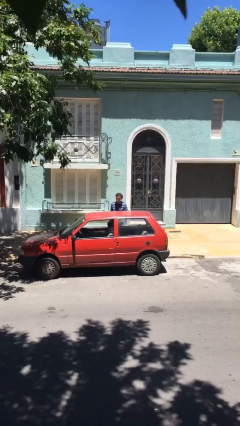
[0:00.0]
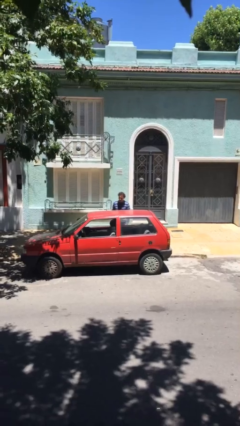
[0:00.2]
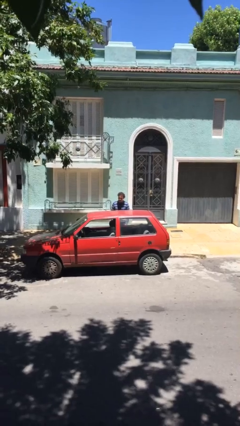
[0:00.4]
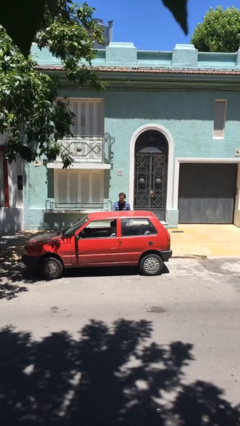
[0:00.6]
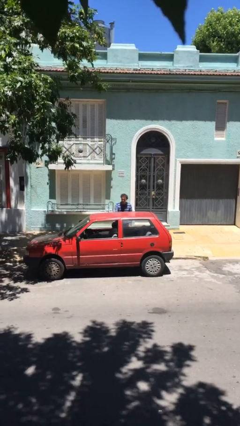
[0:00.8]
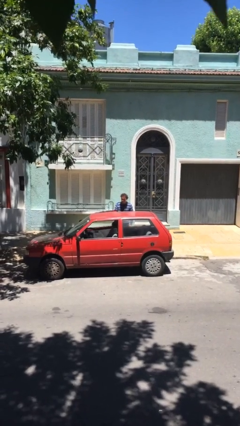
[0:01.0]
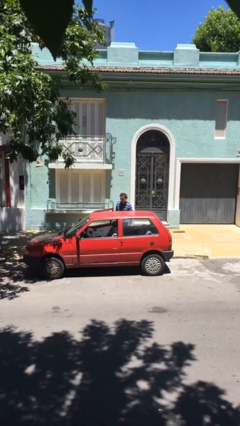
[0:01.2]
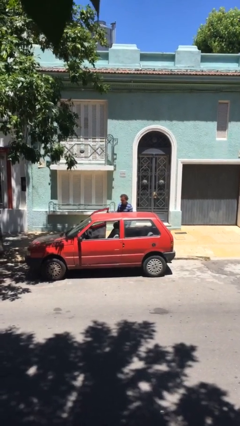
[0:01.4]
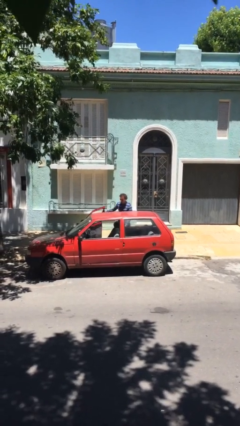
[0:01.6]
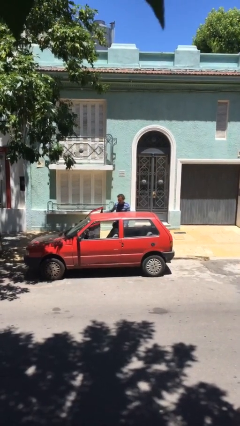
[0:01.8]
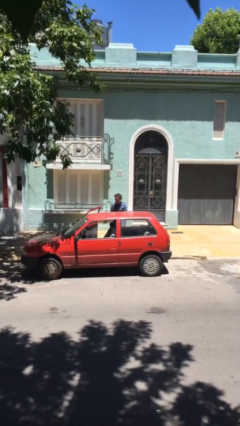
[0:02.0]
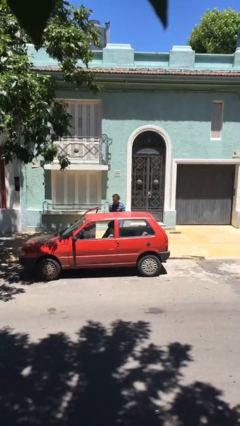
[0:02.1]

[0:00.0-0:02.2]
person opens car door

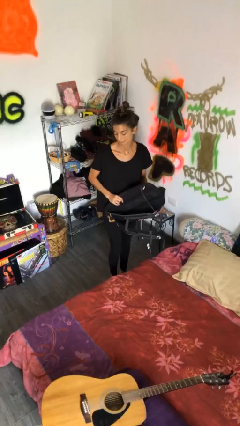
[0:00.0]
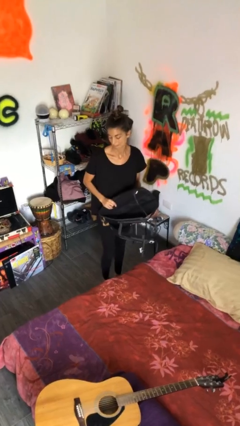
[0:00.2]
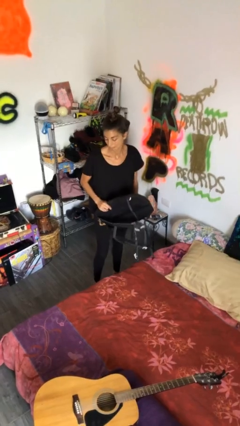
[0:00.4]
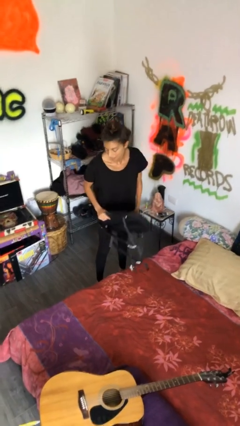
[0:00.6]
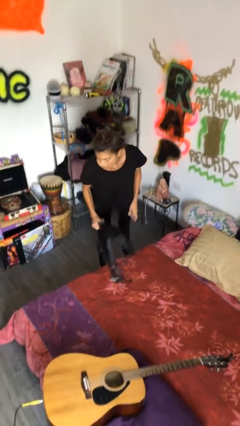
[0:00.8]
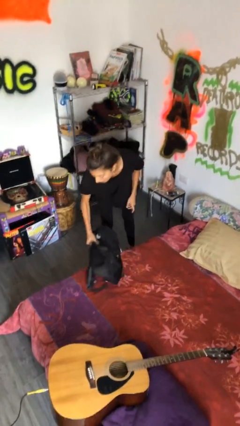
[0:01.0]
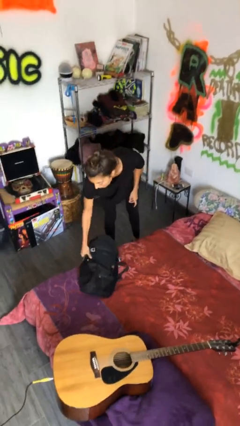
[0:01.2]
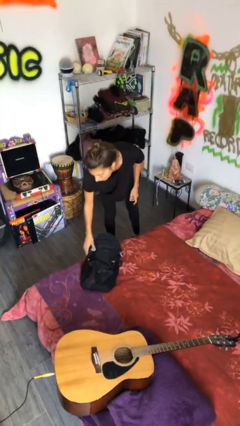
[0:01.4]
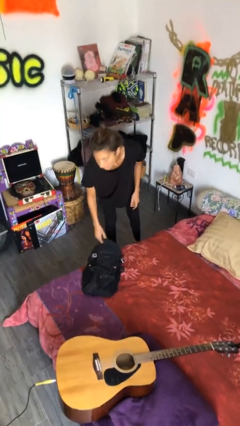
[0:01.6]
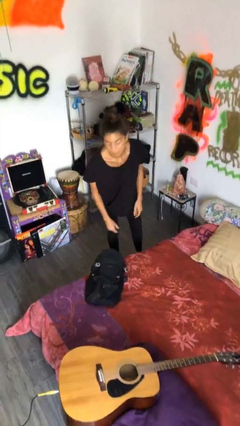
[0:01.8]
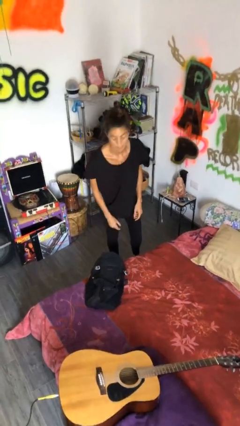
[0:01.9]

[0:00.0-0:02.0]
person puts down object on bed

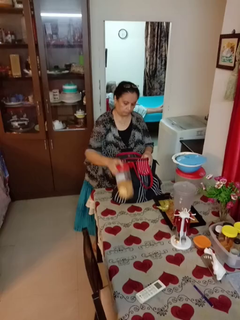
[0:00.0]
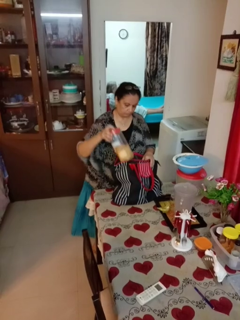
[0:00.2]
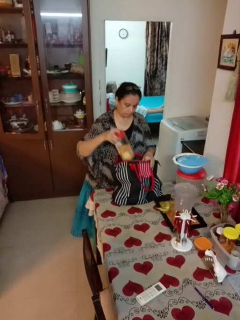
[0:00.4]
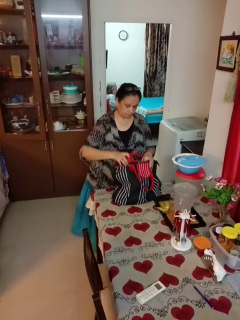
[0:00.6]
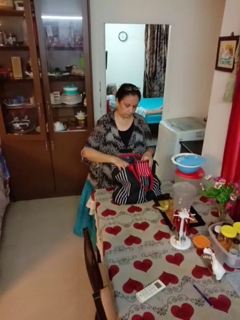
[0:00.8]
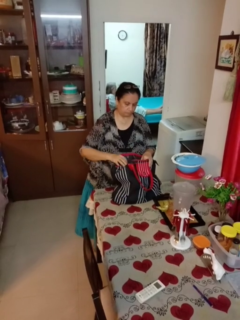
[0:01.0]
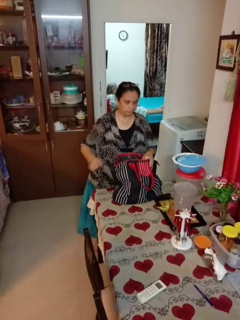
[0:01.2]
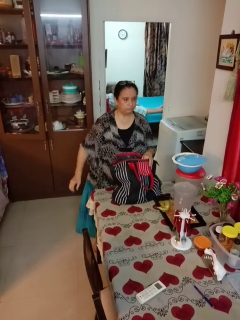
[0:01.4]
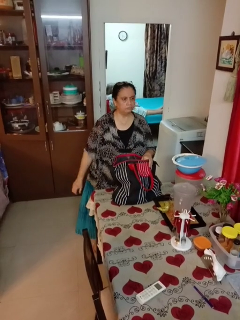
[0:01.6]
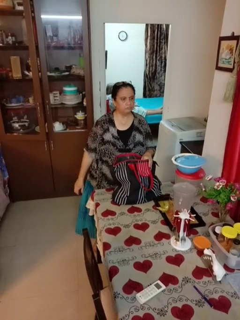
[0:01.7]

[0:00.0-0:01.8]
person puts object into bag

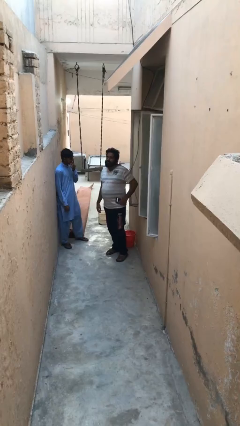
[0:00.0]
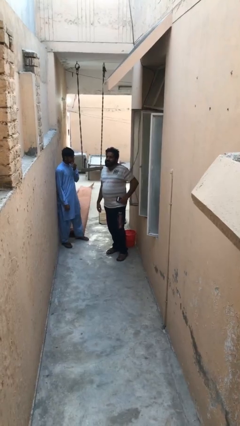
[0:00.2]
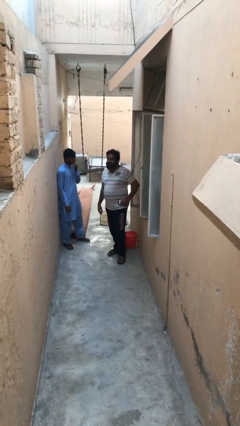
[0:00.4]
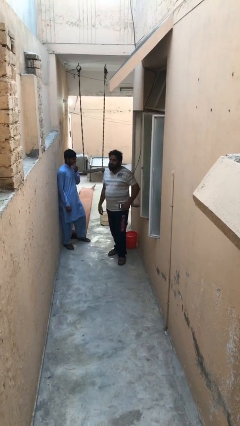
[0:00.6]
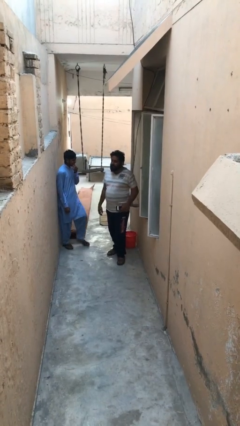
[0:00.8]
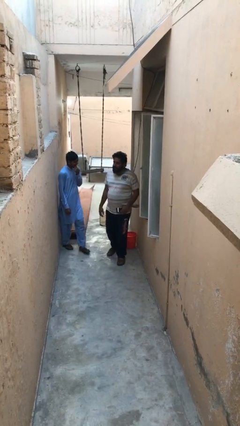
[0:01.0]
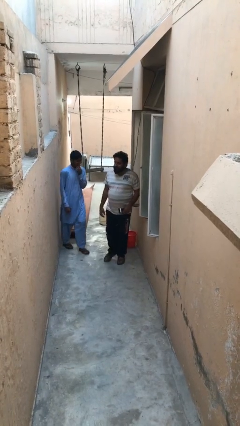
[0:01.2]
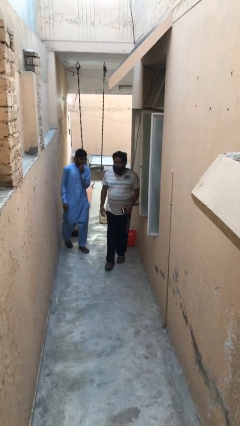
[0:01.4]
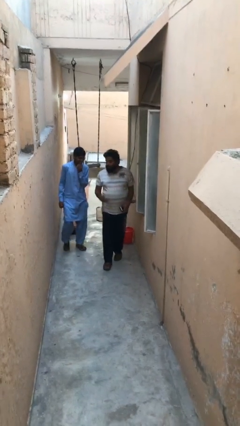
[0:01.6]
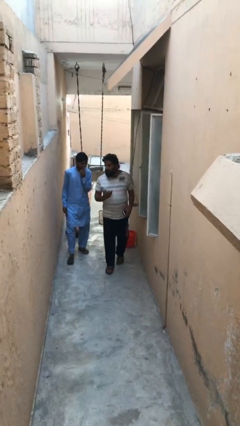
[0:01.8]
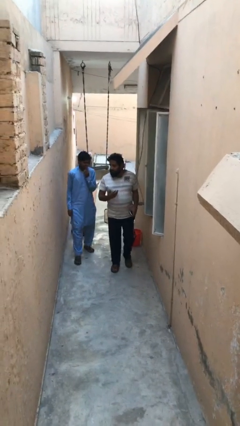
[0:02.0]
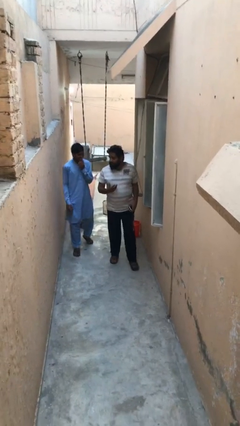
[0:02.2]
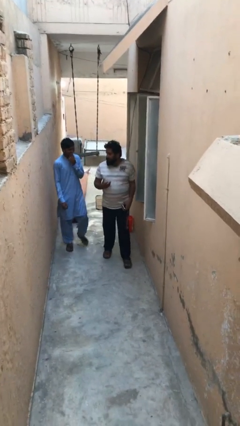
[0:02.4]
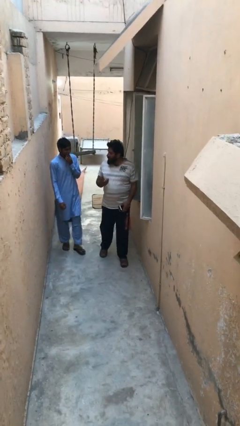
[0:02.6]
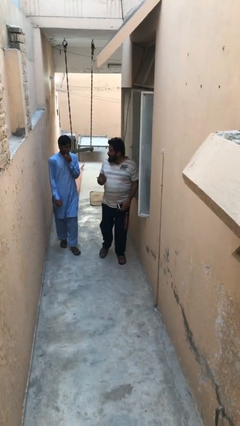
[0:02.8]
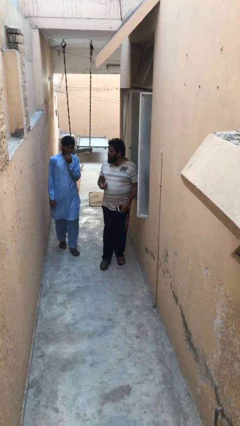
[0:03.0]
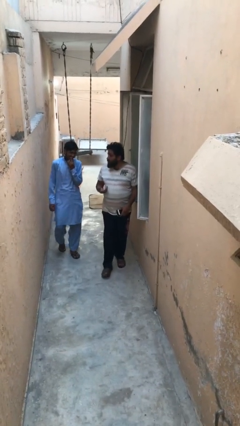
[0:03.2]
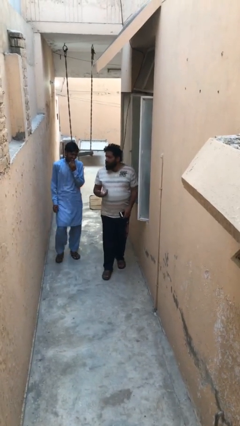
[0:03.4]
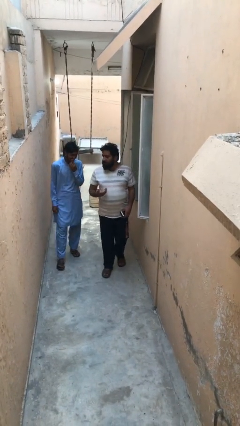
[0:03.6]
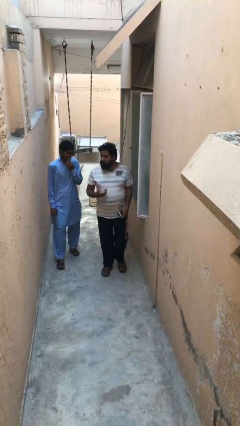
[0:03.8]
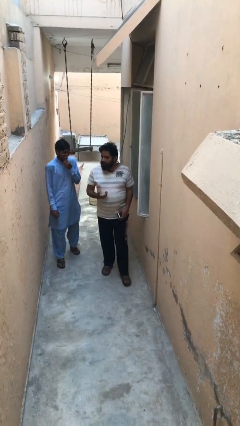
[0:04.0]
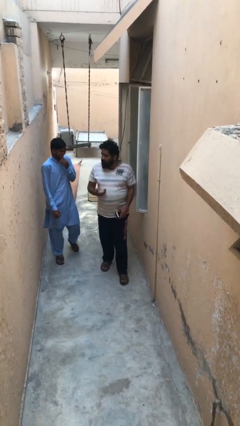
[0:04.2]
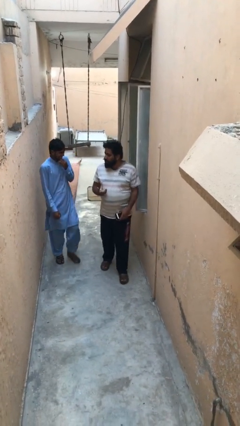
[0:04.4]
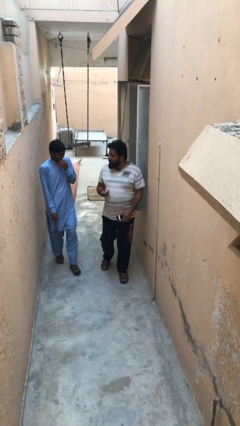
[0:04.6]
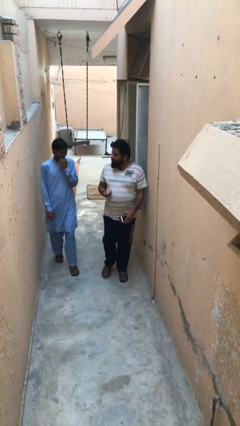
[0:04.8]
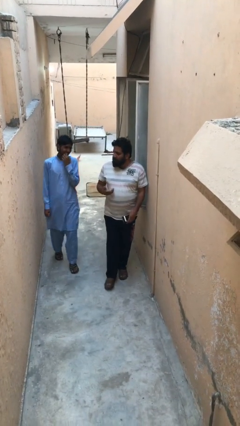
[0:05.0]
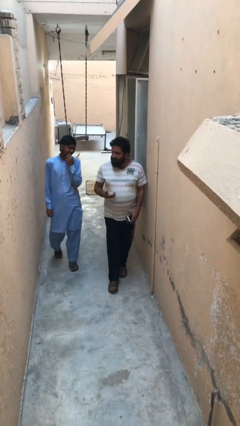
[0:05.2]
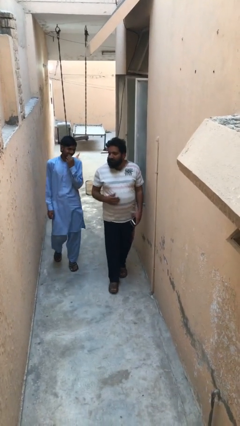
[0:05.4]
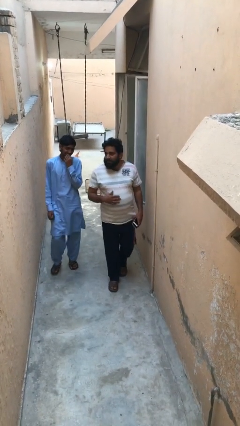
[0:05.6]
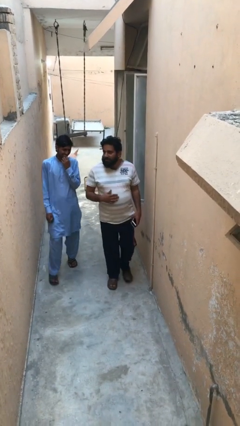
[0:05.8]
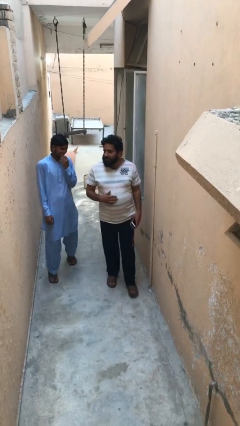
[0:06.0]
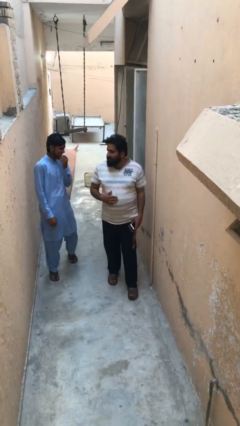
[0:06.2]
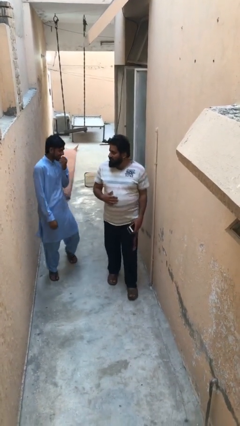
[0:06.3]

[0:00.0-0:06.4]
person talks to person

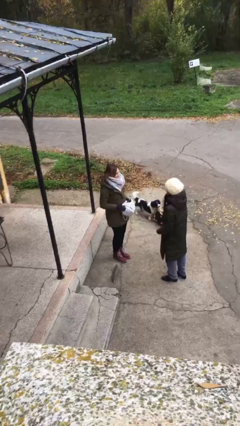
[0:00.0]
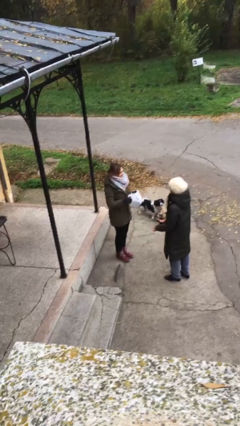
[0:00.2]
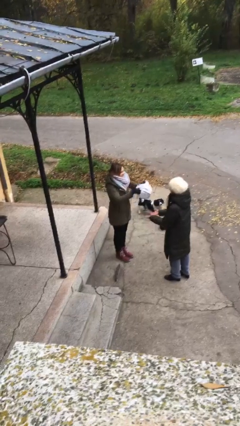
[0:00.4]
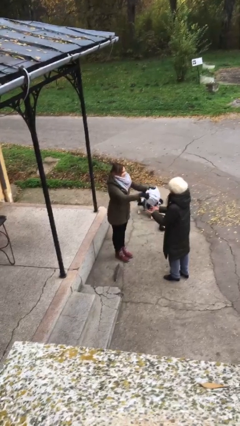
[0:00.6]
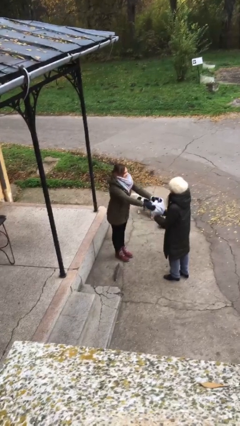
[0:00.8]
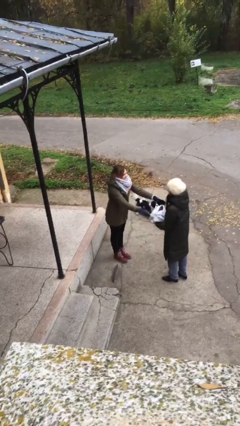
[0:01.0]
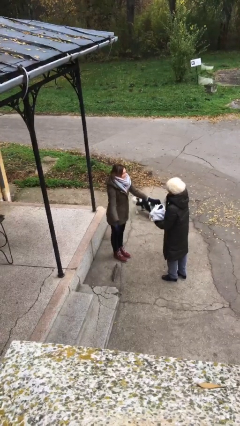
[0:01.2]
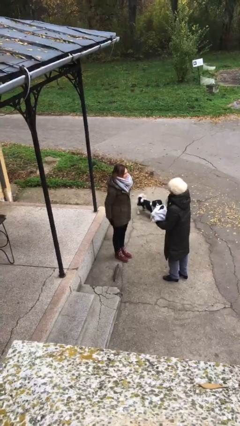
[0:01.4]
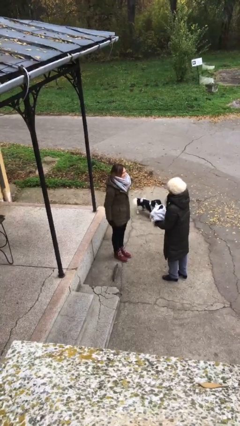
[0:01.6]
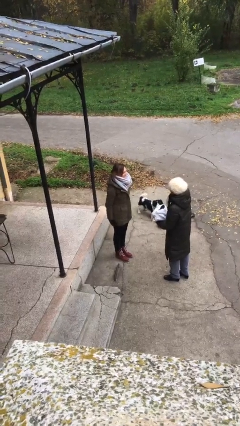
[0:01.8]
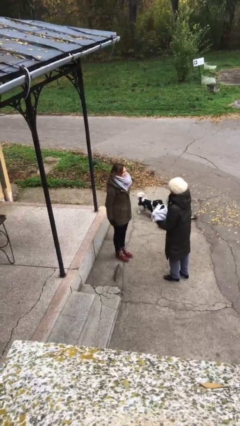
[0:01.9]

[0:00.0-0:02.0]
person transfers object to person

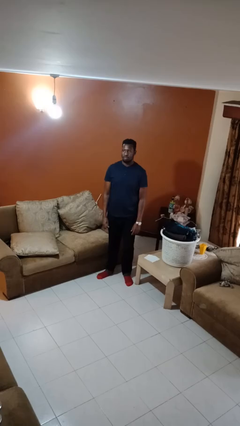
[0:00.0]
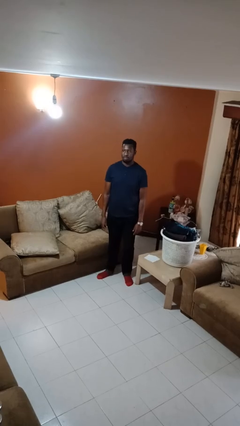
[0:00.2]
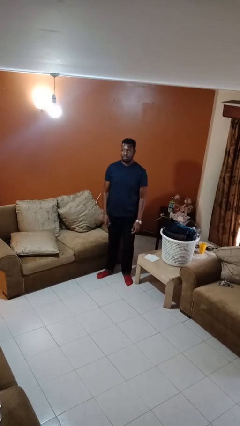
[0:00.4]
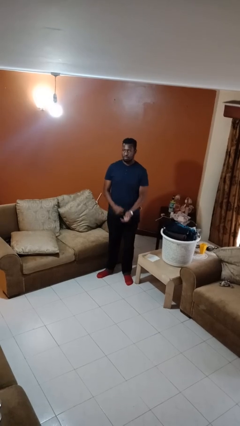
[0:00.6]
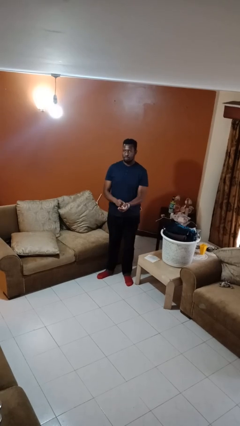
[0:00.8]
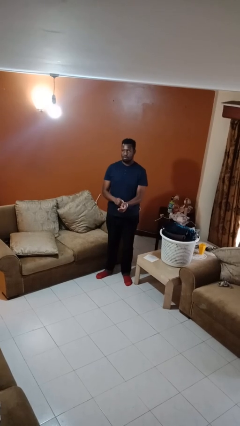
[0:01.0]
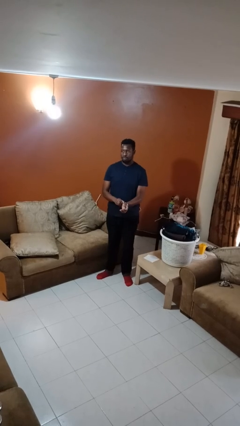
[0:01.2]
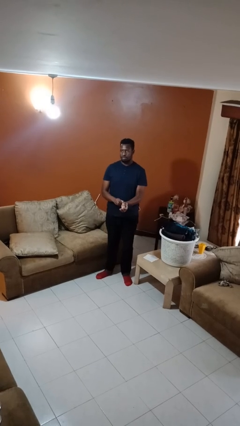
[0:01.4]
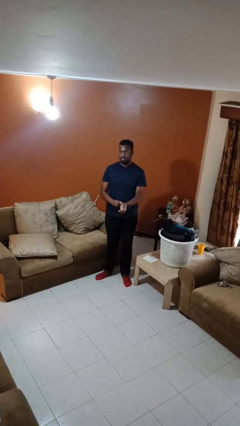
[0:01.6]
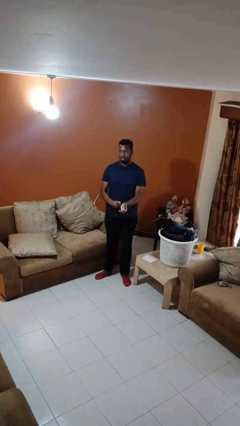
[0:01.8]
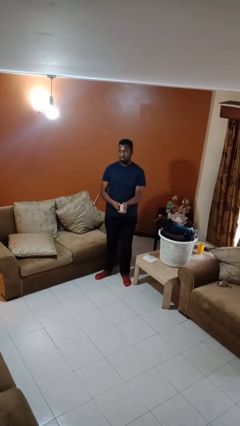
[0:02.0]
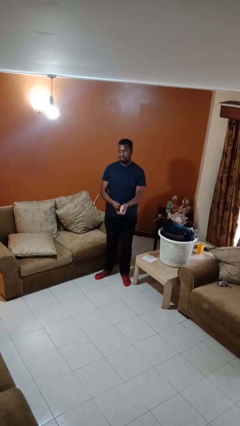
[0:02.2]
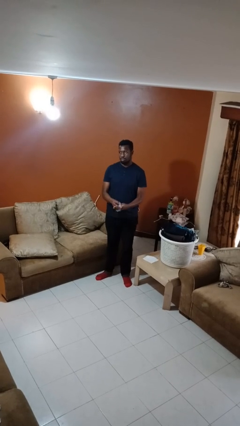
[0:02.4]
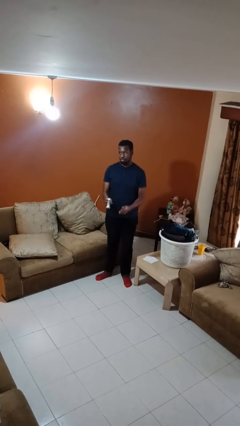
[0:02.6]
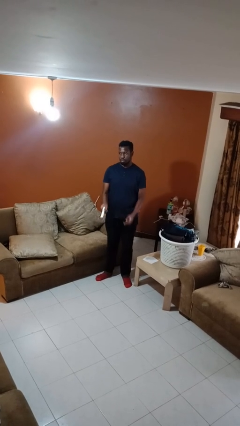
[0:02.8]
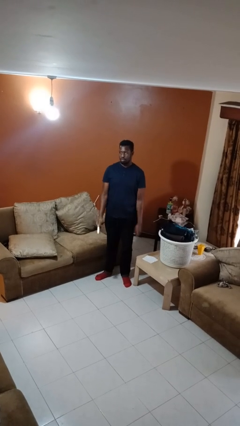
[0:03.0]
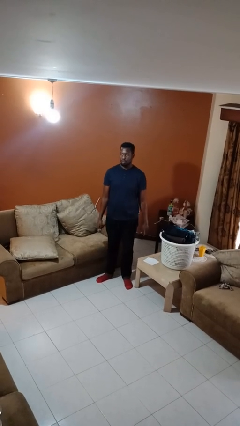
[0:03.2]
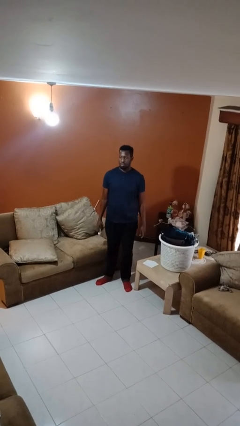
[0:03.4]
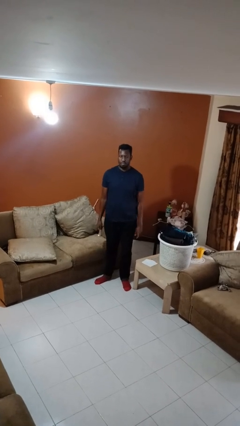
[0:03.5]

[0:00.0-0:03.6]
person takes off wristwatch
